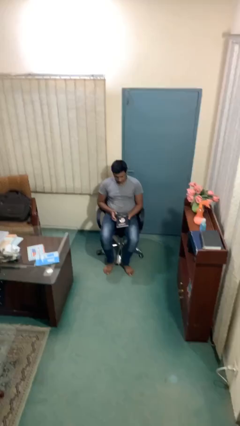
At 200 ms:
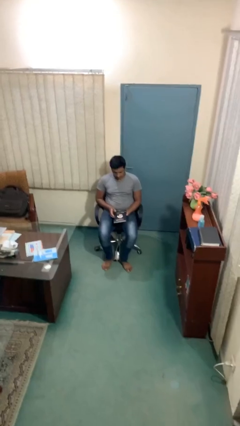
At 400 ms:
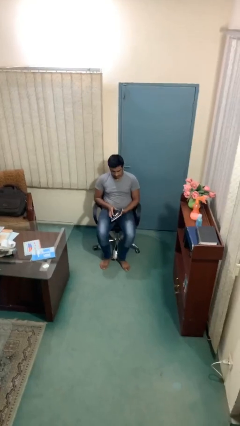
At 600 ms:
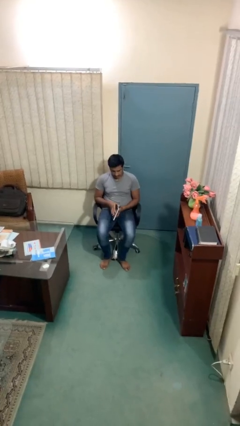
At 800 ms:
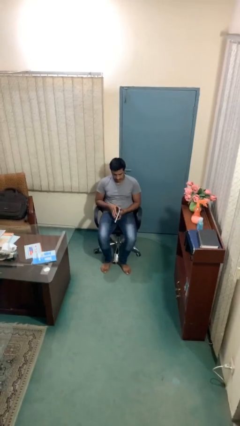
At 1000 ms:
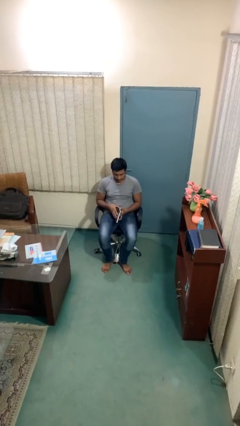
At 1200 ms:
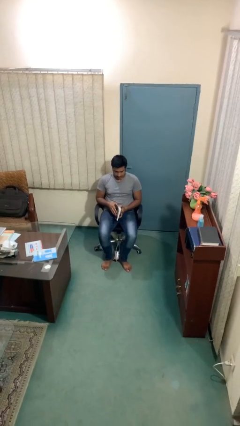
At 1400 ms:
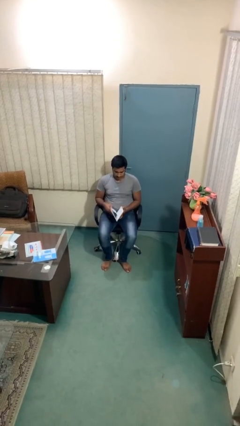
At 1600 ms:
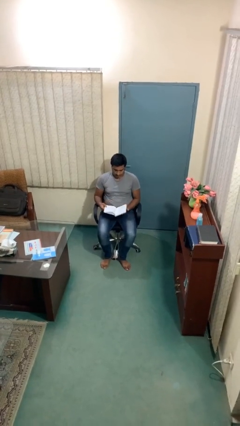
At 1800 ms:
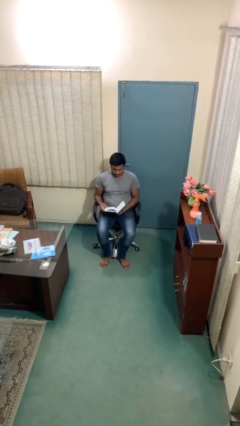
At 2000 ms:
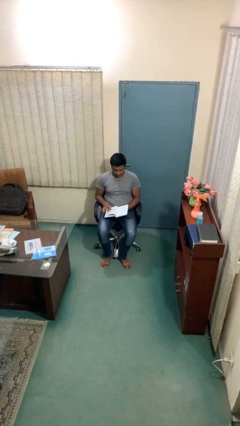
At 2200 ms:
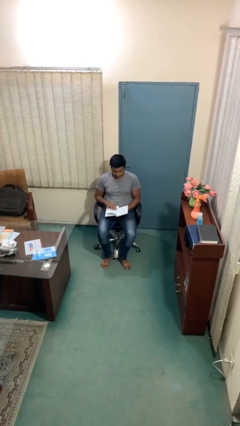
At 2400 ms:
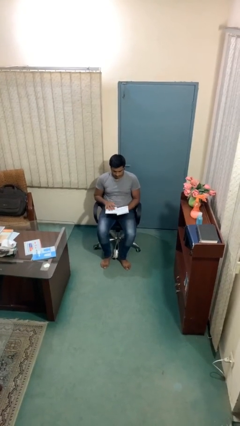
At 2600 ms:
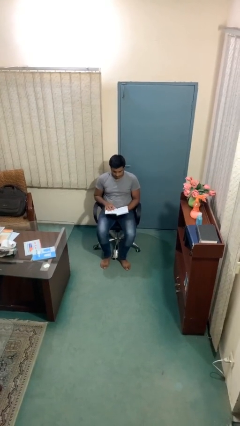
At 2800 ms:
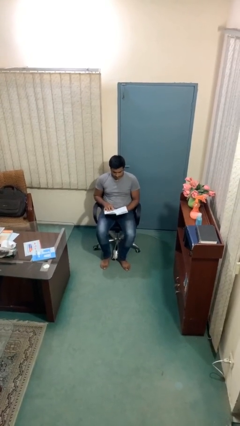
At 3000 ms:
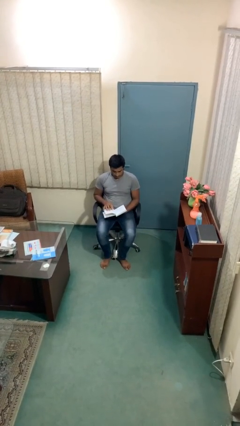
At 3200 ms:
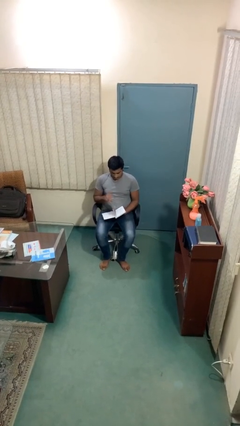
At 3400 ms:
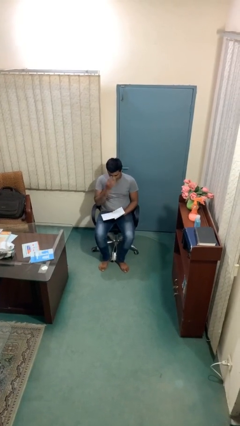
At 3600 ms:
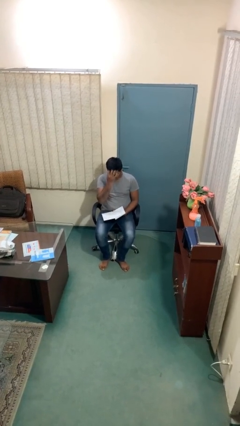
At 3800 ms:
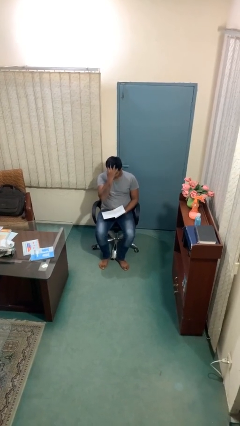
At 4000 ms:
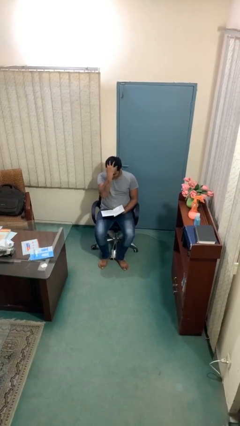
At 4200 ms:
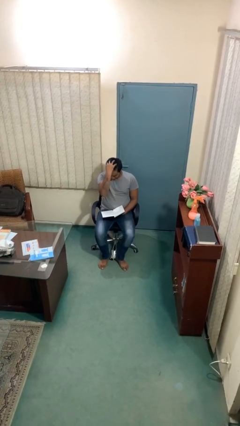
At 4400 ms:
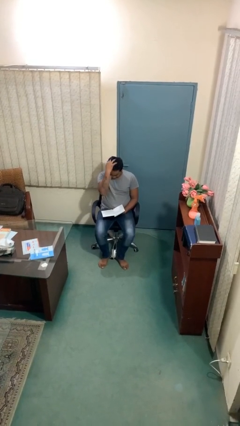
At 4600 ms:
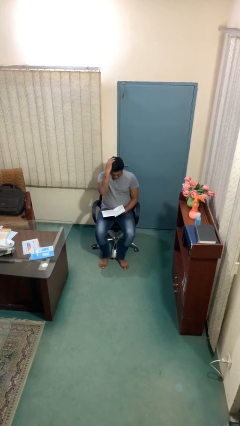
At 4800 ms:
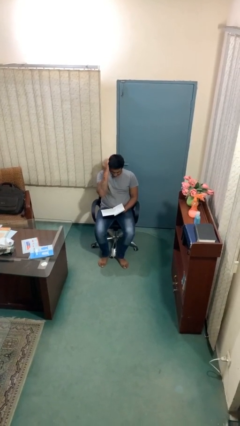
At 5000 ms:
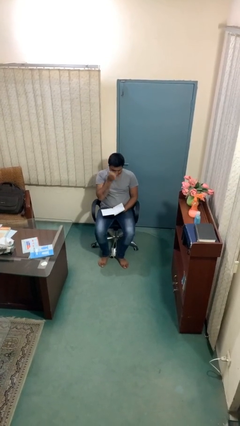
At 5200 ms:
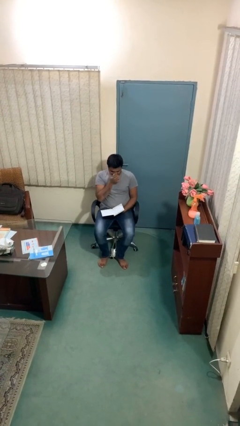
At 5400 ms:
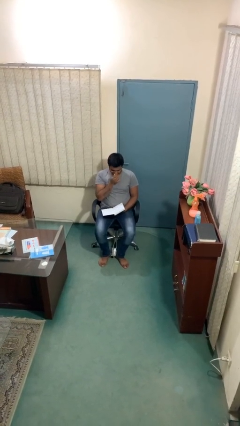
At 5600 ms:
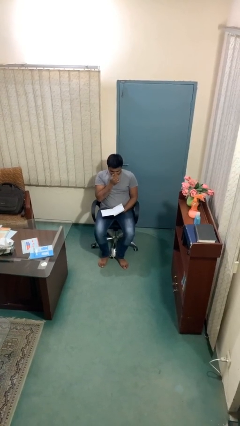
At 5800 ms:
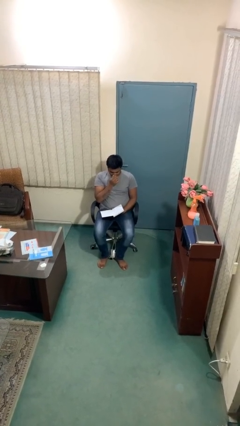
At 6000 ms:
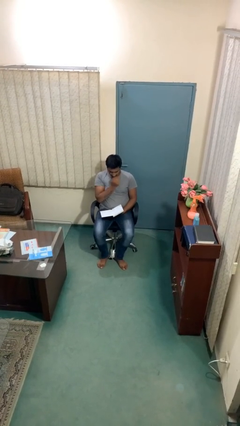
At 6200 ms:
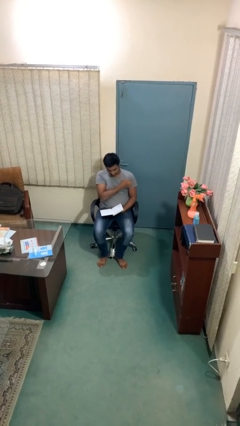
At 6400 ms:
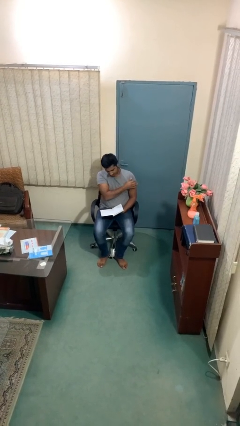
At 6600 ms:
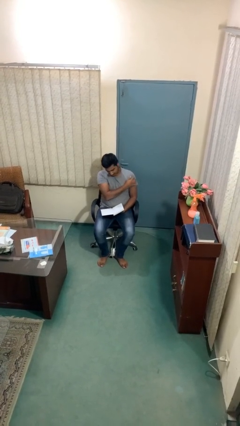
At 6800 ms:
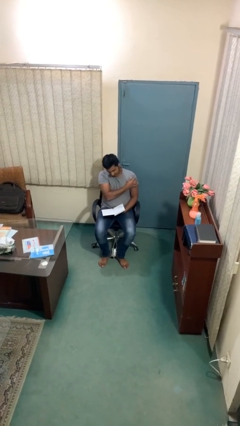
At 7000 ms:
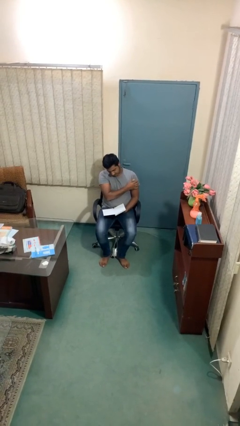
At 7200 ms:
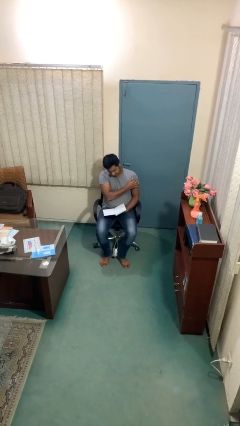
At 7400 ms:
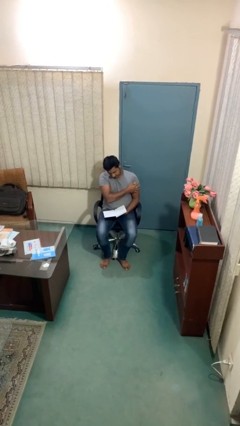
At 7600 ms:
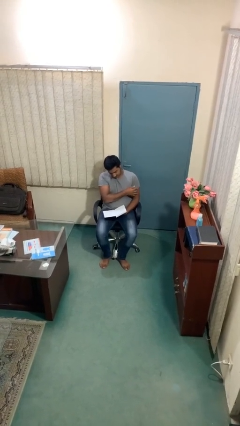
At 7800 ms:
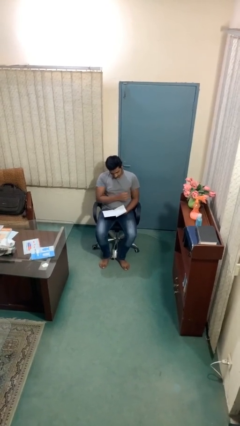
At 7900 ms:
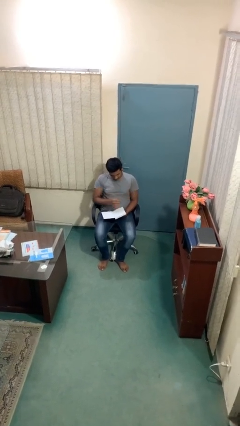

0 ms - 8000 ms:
person reads document

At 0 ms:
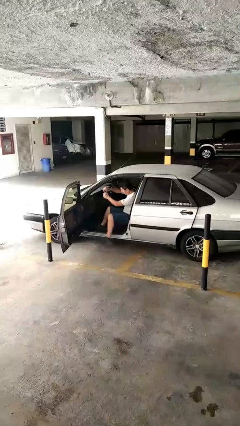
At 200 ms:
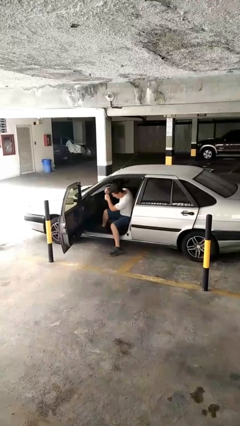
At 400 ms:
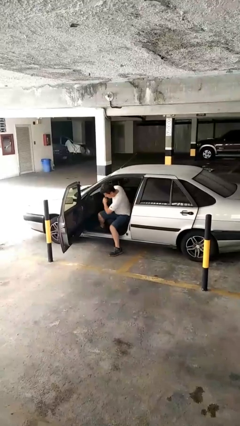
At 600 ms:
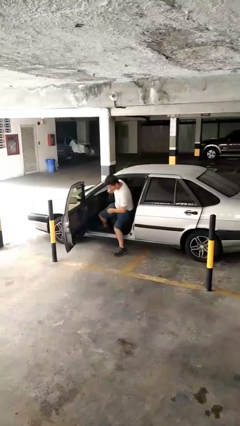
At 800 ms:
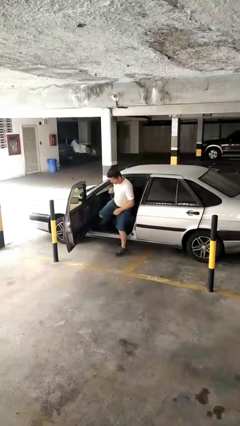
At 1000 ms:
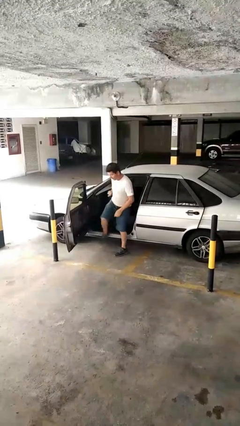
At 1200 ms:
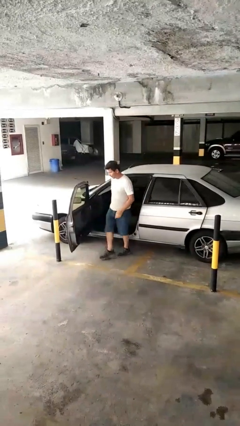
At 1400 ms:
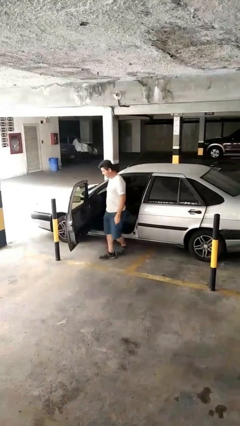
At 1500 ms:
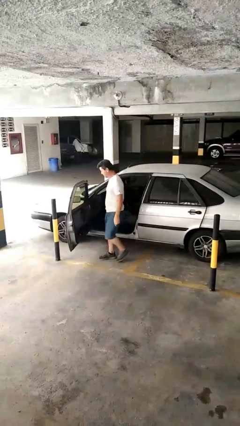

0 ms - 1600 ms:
person exits car

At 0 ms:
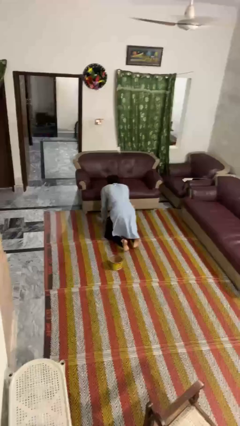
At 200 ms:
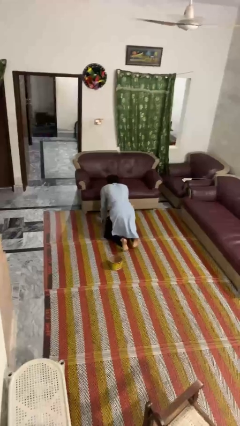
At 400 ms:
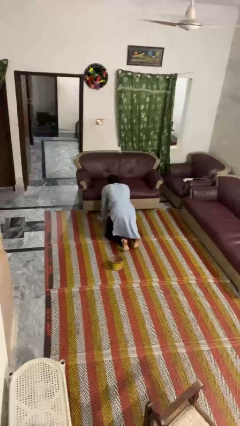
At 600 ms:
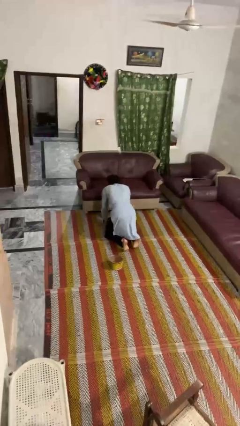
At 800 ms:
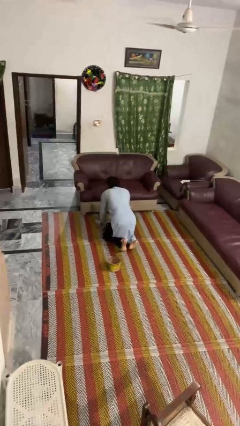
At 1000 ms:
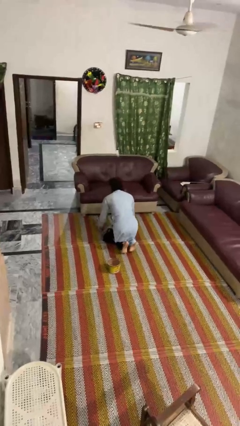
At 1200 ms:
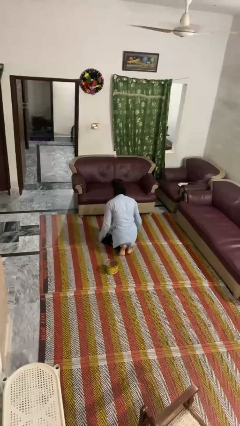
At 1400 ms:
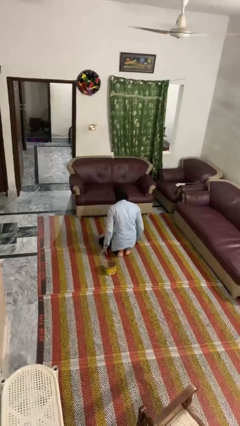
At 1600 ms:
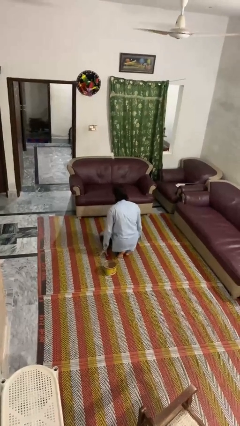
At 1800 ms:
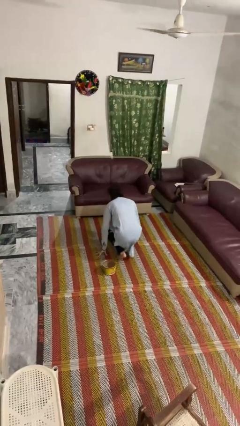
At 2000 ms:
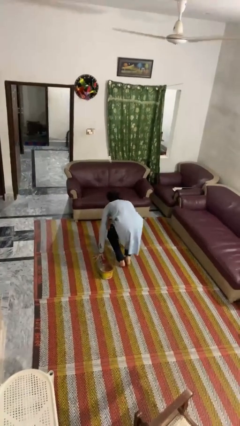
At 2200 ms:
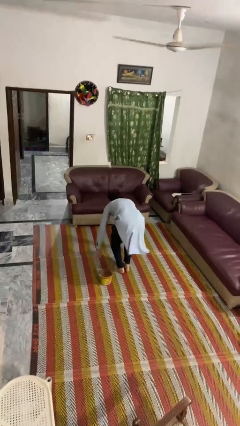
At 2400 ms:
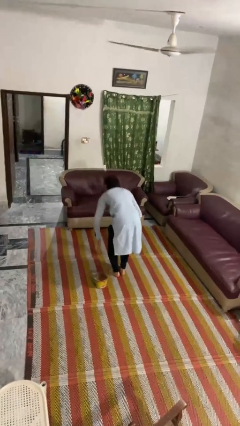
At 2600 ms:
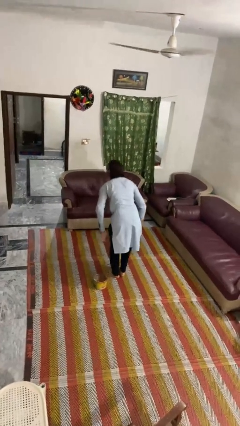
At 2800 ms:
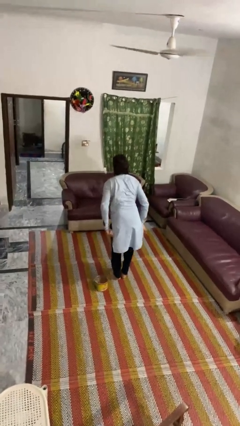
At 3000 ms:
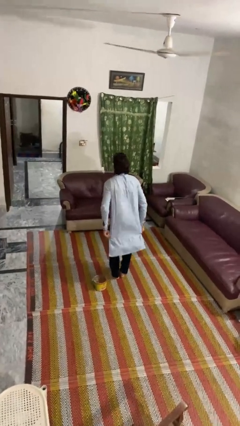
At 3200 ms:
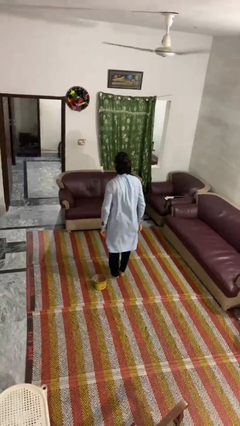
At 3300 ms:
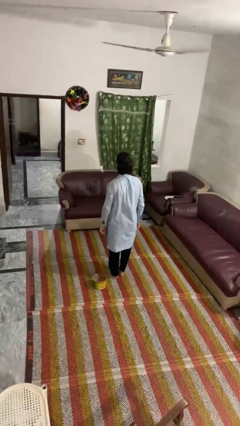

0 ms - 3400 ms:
person stands up from floor

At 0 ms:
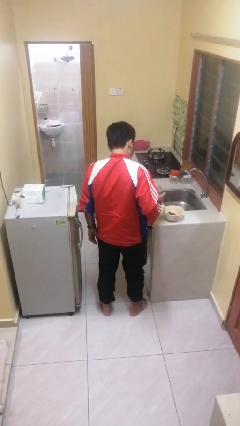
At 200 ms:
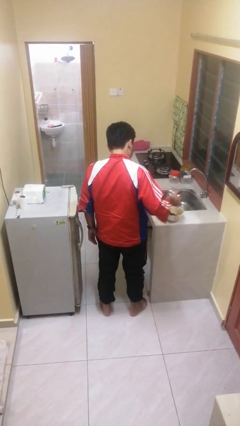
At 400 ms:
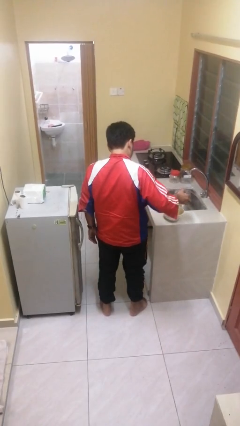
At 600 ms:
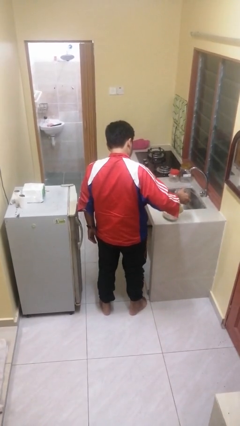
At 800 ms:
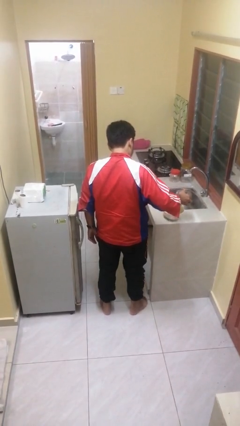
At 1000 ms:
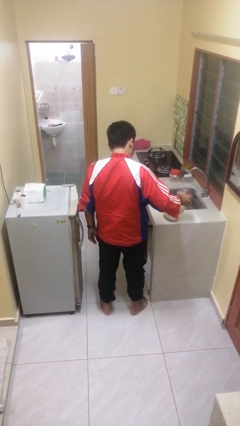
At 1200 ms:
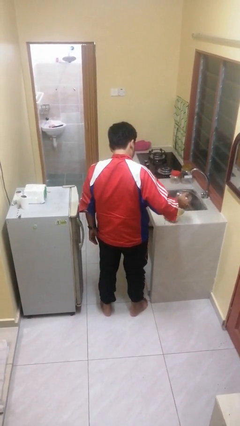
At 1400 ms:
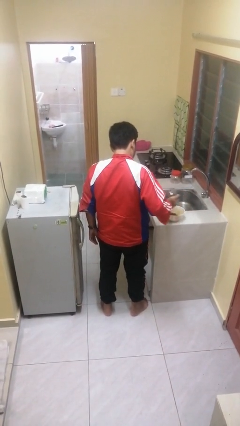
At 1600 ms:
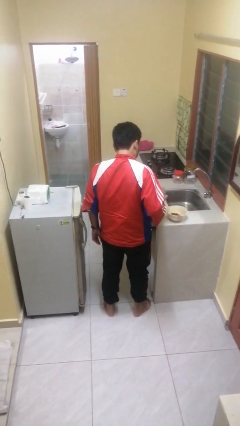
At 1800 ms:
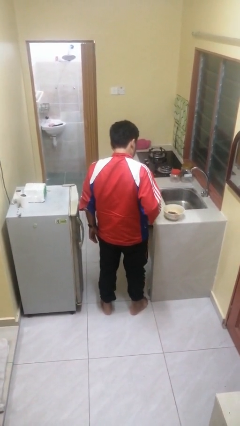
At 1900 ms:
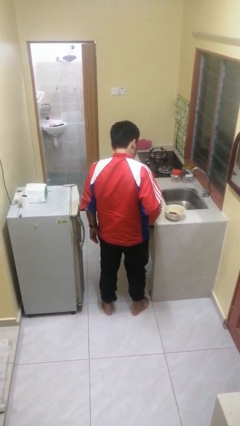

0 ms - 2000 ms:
person pours into bowl

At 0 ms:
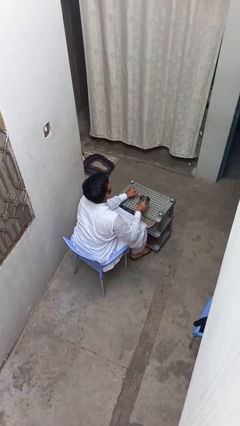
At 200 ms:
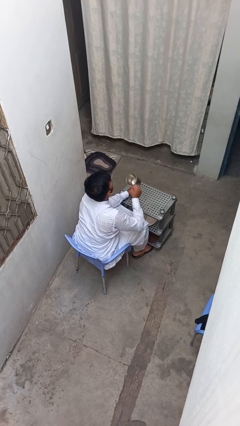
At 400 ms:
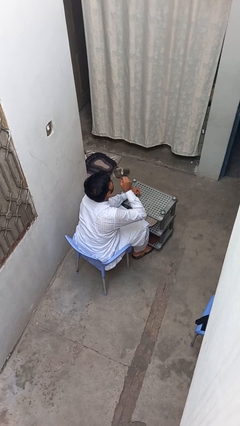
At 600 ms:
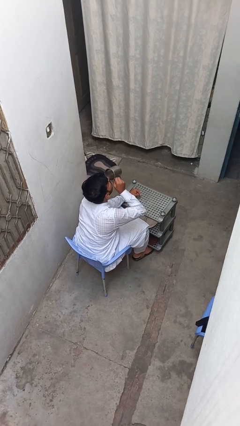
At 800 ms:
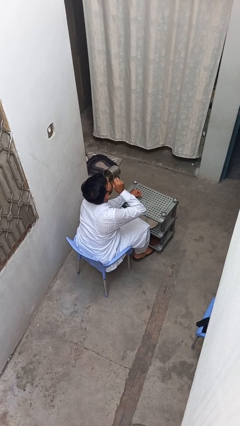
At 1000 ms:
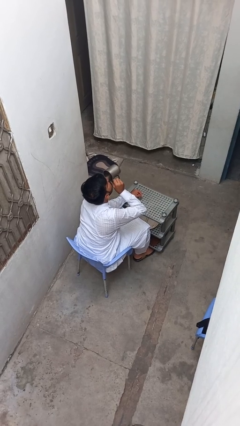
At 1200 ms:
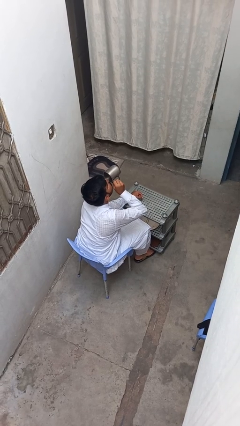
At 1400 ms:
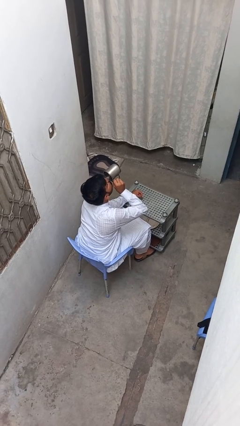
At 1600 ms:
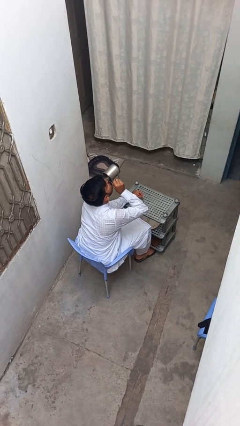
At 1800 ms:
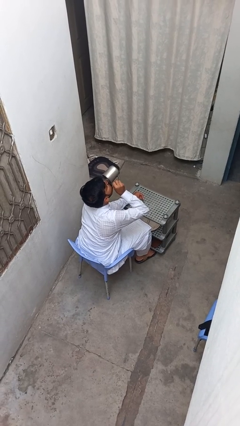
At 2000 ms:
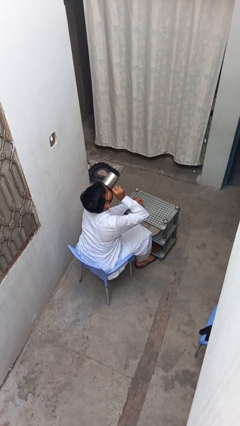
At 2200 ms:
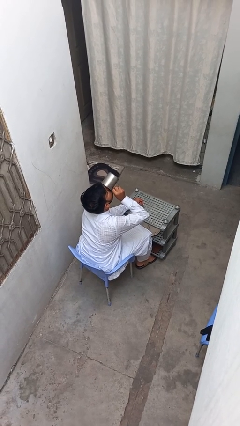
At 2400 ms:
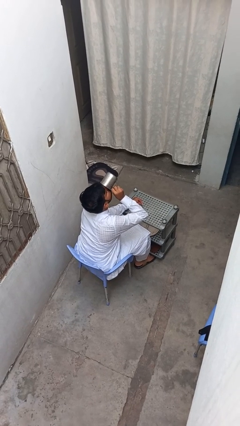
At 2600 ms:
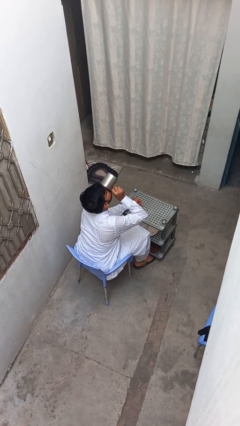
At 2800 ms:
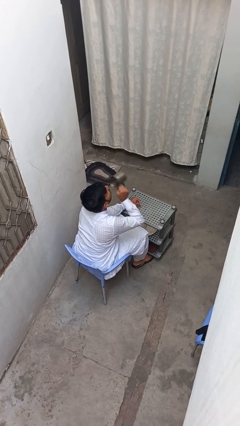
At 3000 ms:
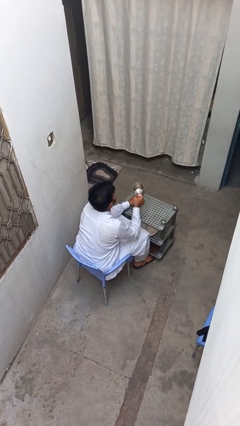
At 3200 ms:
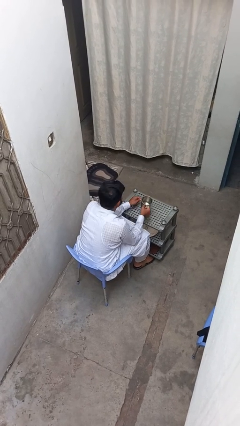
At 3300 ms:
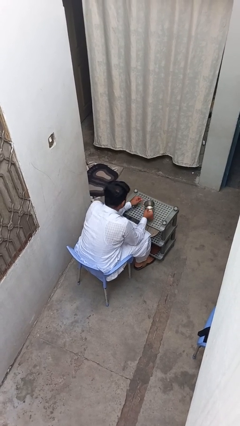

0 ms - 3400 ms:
person drinks from cup
